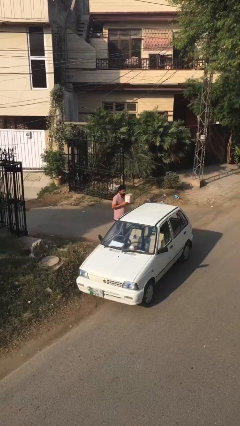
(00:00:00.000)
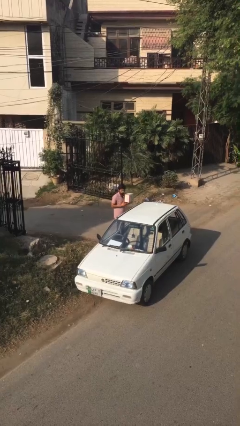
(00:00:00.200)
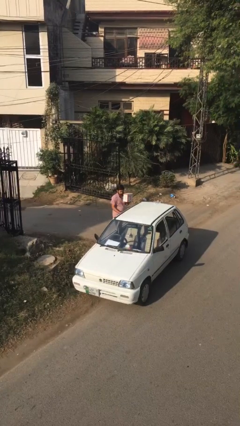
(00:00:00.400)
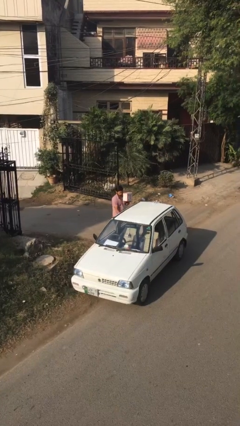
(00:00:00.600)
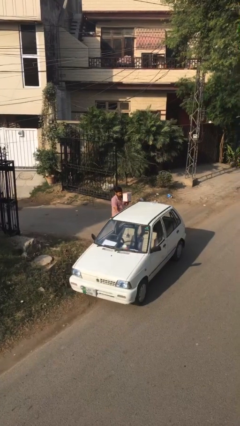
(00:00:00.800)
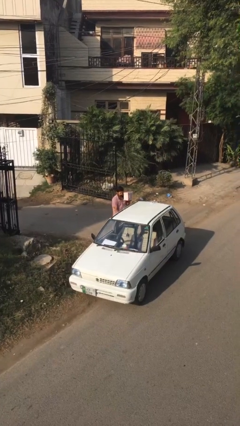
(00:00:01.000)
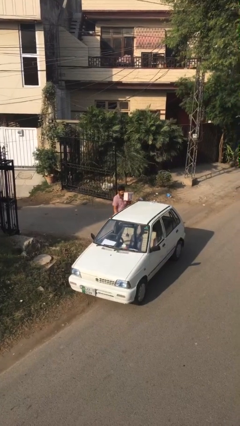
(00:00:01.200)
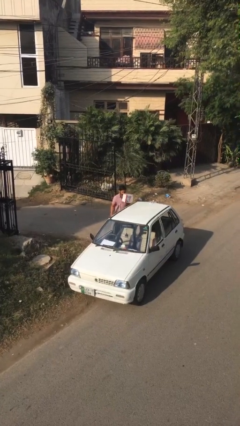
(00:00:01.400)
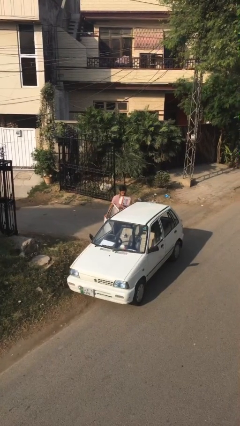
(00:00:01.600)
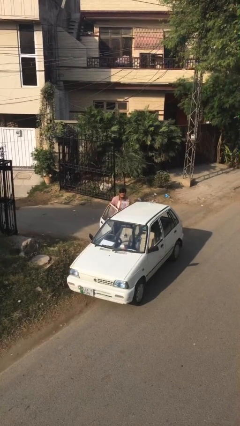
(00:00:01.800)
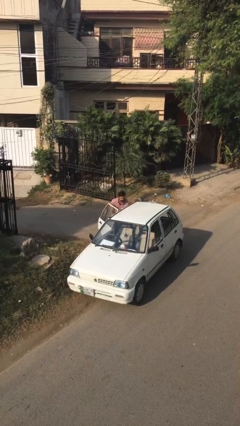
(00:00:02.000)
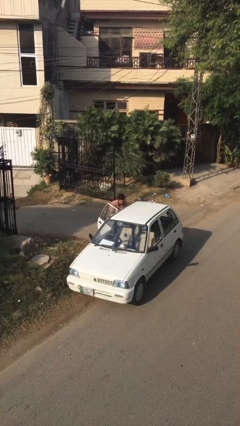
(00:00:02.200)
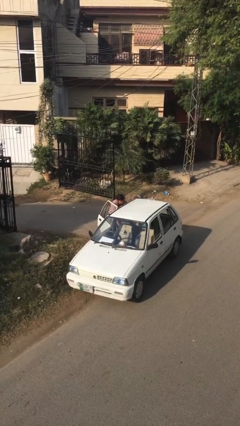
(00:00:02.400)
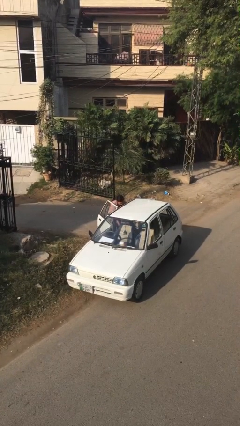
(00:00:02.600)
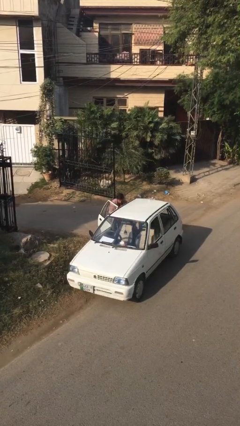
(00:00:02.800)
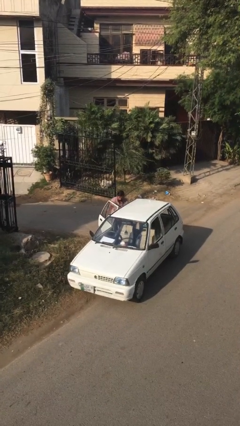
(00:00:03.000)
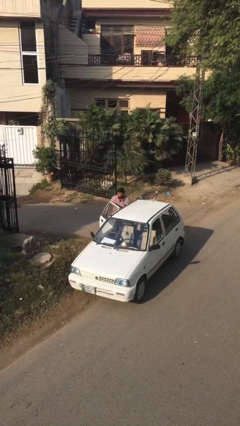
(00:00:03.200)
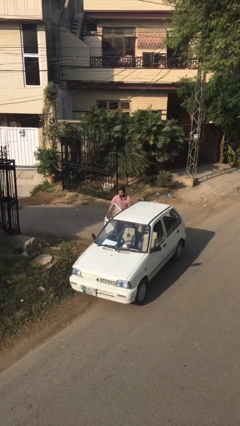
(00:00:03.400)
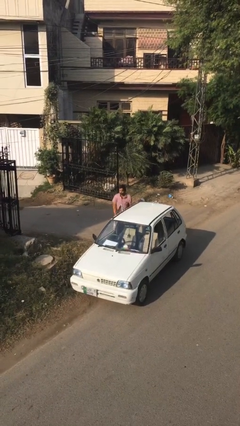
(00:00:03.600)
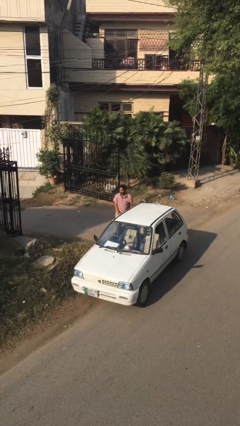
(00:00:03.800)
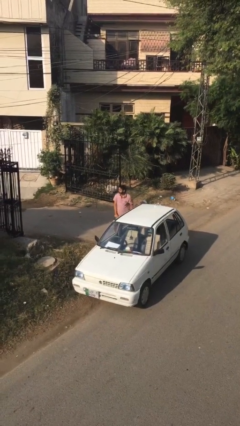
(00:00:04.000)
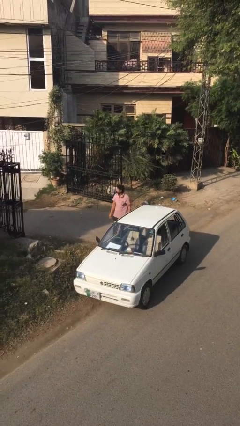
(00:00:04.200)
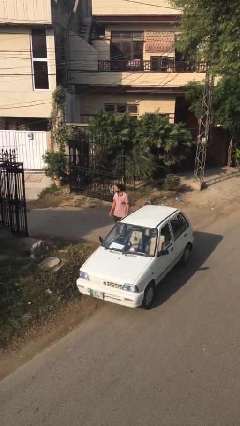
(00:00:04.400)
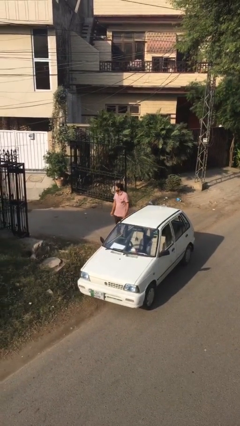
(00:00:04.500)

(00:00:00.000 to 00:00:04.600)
person loads car

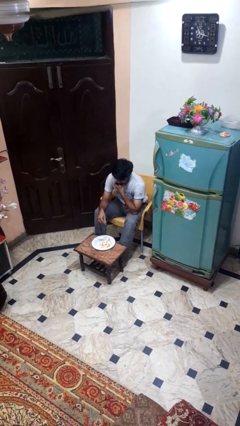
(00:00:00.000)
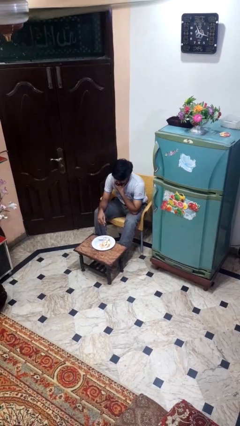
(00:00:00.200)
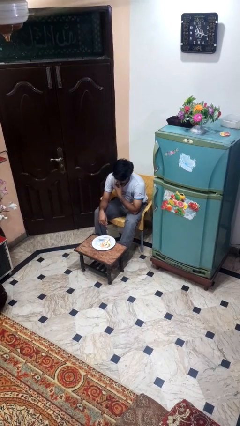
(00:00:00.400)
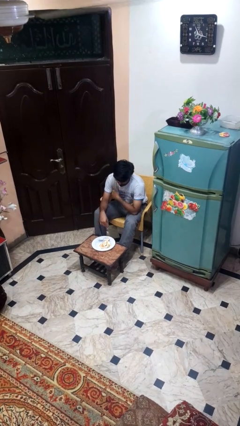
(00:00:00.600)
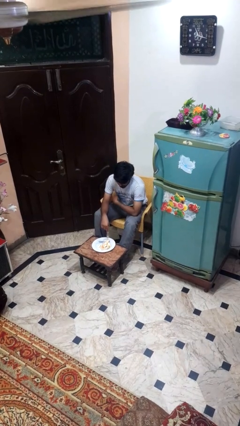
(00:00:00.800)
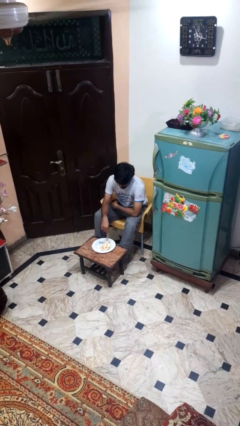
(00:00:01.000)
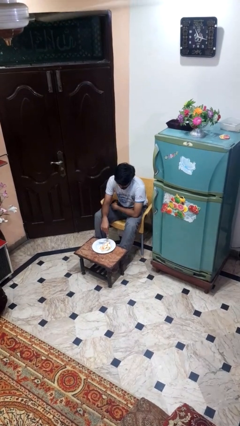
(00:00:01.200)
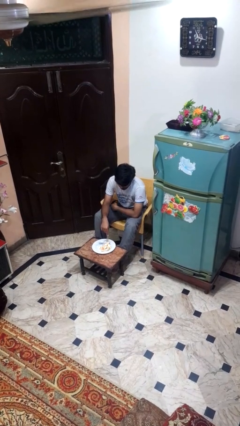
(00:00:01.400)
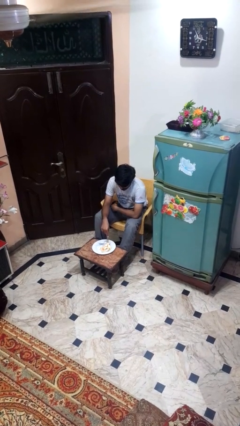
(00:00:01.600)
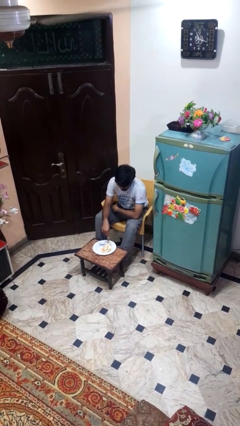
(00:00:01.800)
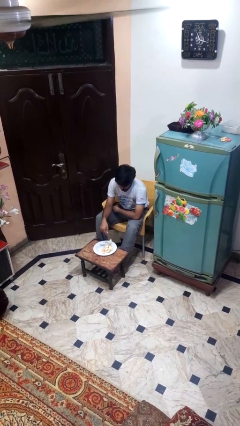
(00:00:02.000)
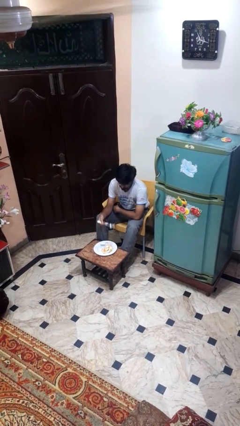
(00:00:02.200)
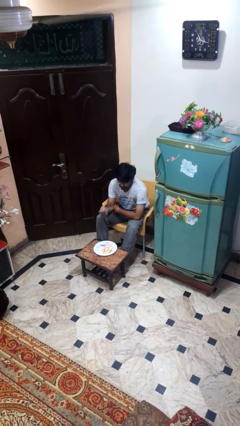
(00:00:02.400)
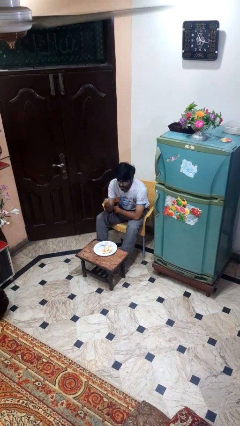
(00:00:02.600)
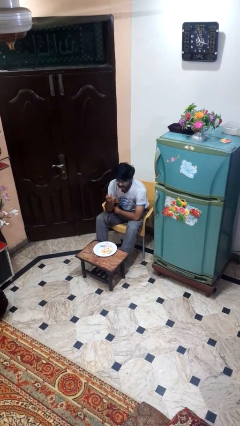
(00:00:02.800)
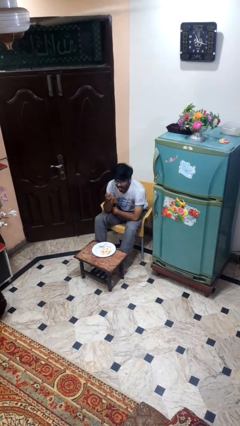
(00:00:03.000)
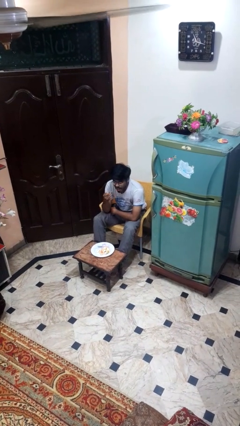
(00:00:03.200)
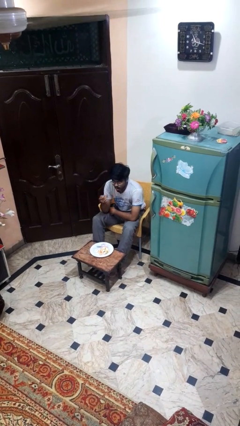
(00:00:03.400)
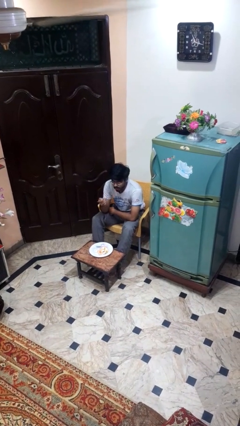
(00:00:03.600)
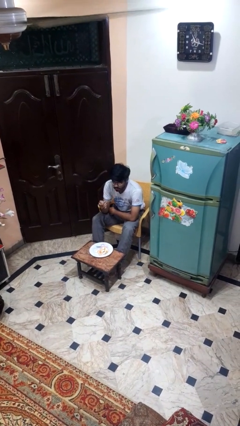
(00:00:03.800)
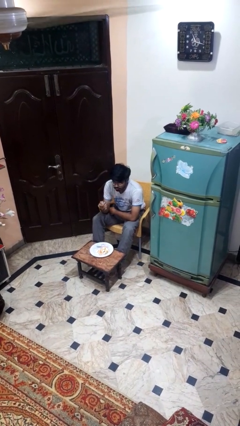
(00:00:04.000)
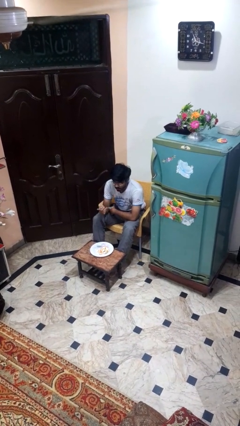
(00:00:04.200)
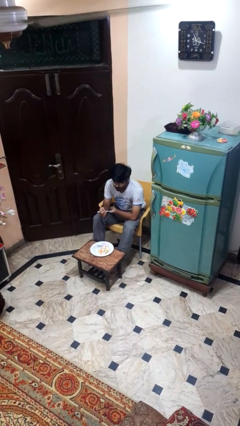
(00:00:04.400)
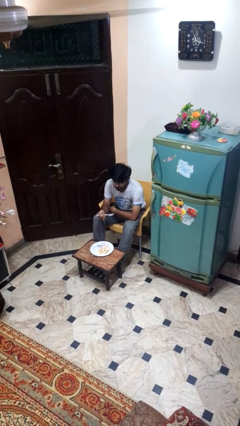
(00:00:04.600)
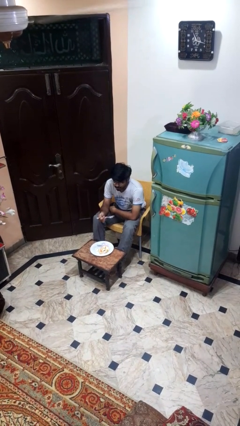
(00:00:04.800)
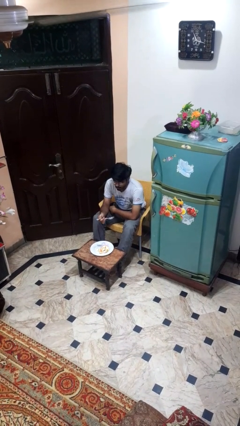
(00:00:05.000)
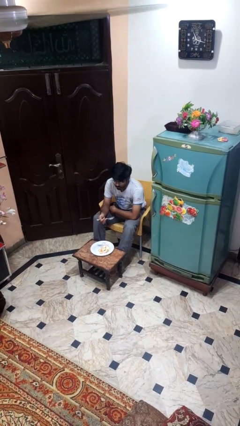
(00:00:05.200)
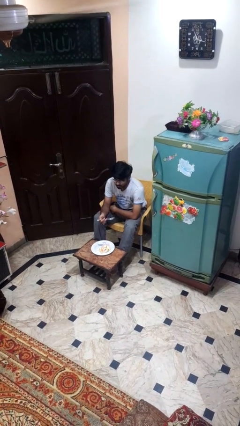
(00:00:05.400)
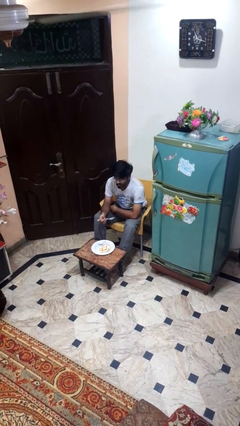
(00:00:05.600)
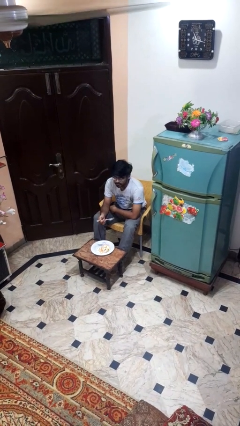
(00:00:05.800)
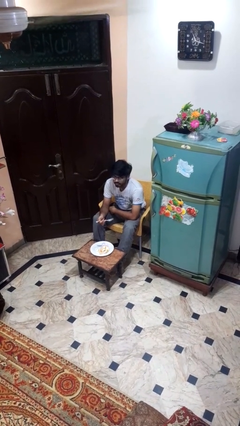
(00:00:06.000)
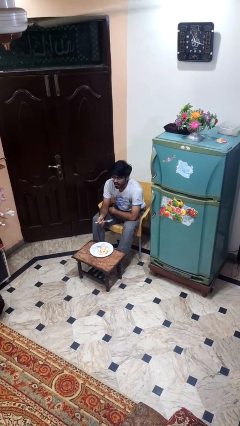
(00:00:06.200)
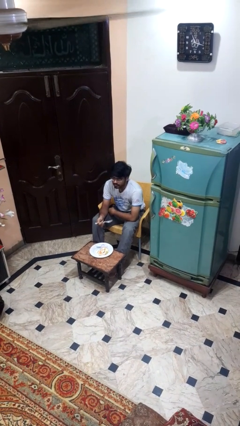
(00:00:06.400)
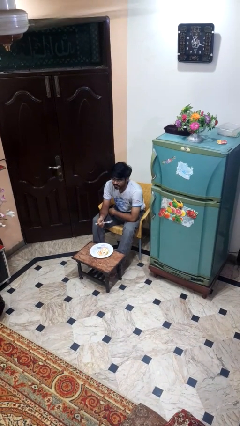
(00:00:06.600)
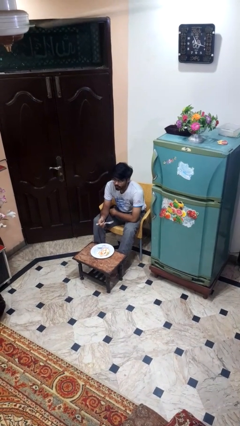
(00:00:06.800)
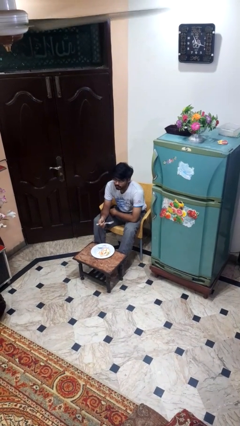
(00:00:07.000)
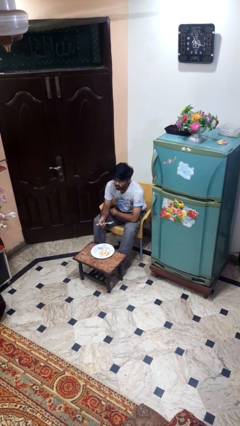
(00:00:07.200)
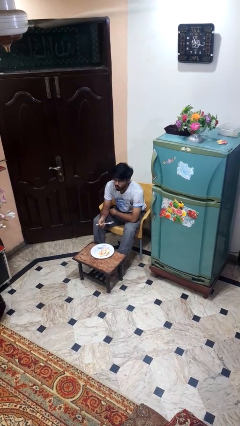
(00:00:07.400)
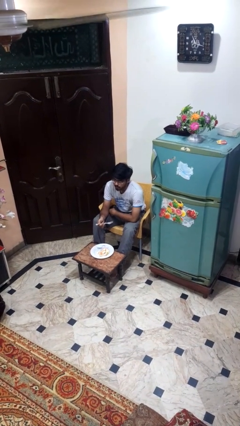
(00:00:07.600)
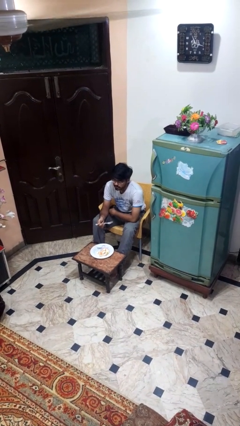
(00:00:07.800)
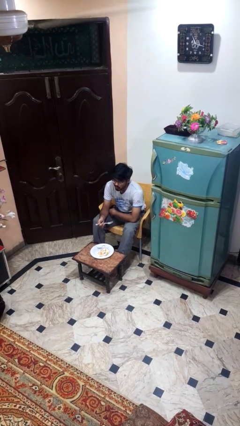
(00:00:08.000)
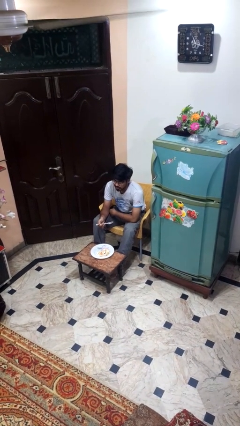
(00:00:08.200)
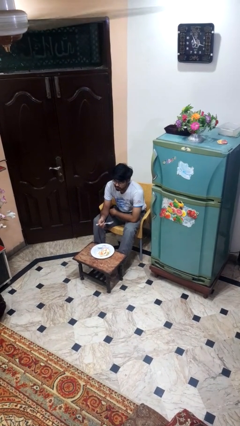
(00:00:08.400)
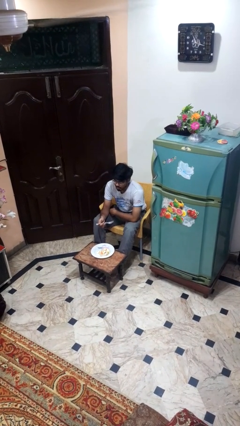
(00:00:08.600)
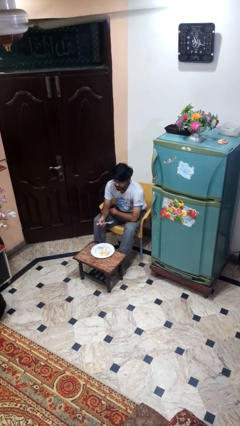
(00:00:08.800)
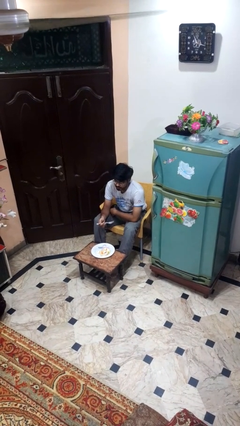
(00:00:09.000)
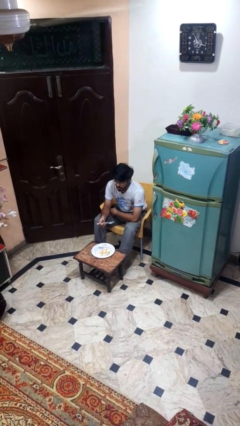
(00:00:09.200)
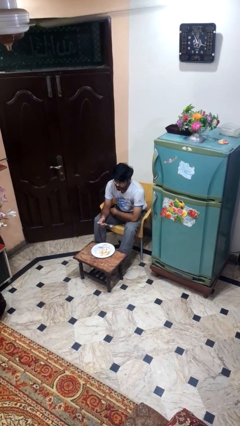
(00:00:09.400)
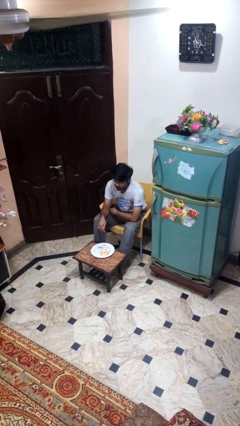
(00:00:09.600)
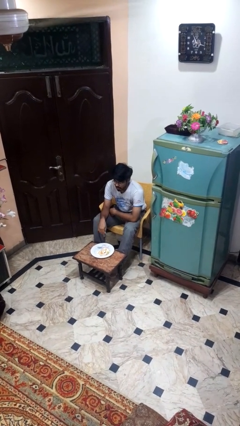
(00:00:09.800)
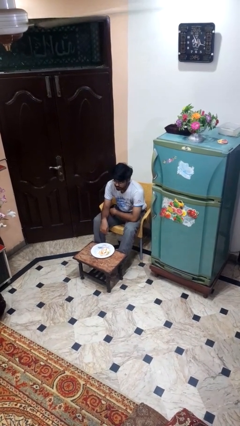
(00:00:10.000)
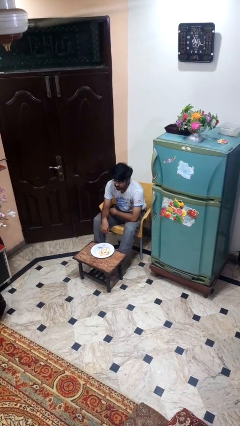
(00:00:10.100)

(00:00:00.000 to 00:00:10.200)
person eats with utensil

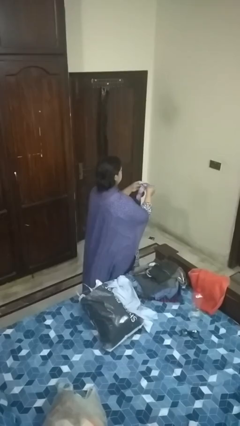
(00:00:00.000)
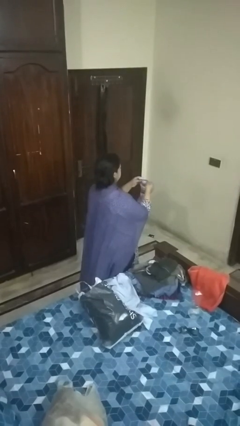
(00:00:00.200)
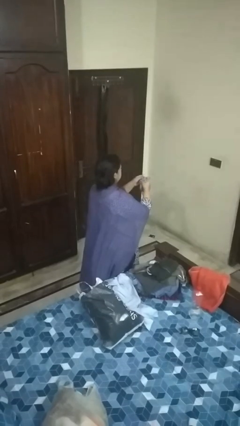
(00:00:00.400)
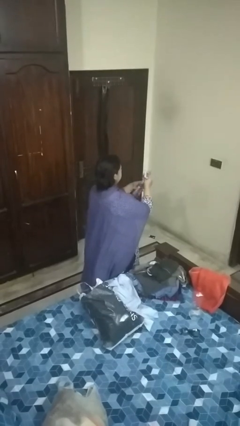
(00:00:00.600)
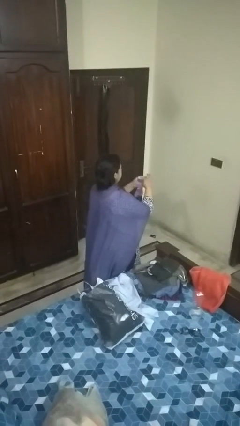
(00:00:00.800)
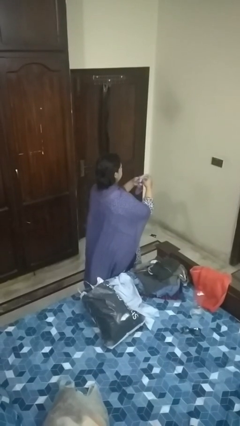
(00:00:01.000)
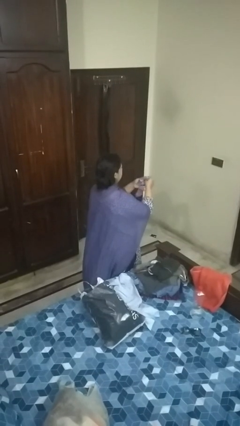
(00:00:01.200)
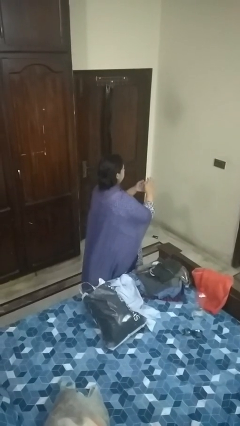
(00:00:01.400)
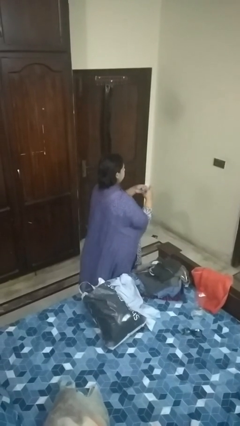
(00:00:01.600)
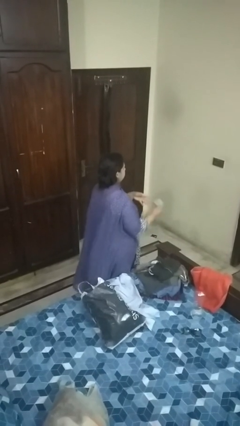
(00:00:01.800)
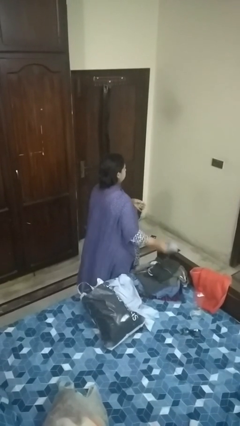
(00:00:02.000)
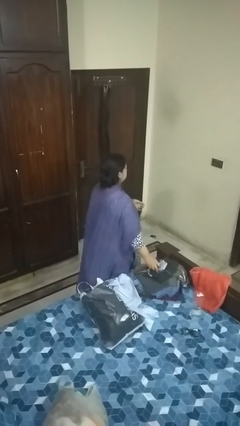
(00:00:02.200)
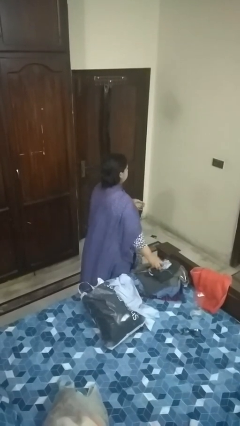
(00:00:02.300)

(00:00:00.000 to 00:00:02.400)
person folds socks

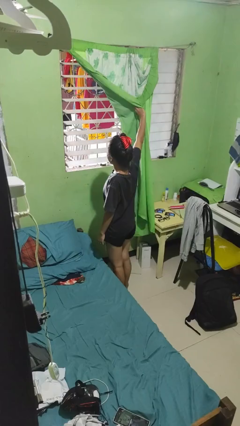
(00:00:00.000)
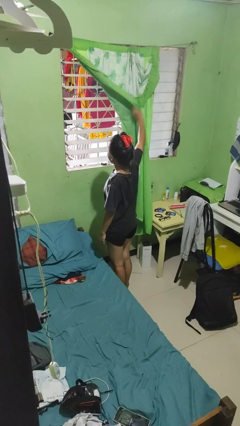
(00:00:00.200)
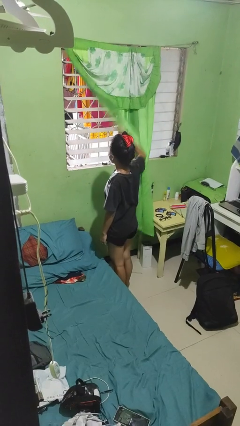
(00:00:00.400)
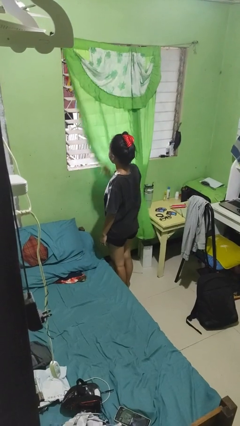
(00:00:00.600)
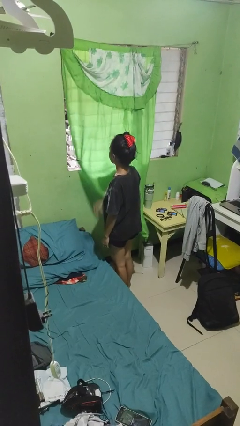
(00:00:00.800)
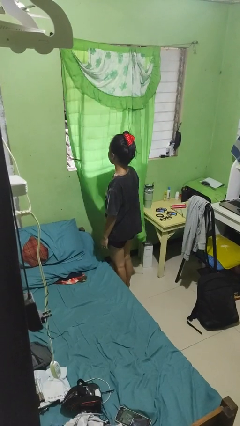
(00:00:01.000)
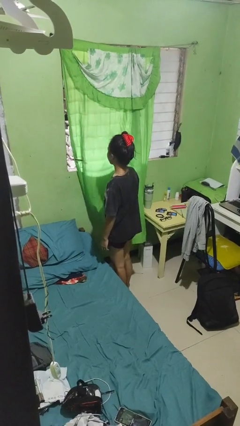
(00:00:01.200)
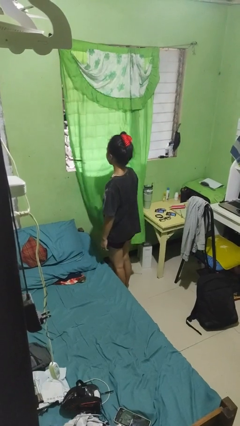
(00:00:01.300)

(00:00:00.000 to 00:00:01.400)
person closes curtains
